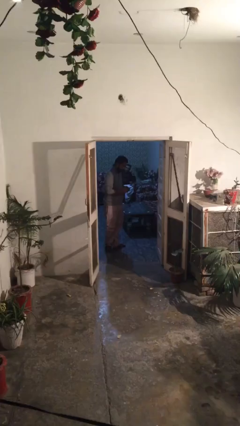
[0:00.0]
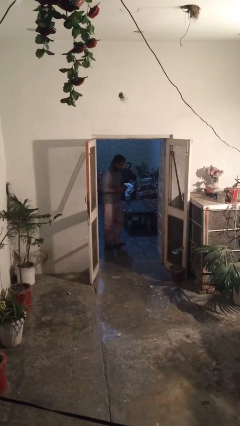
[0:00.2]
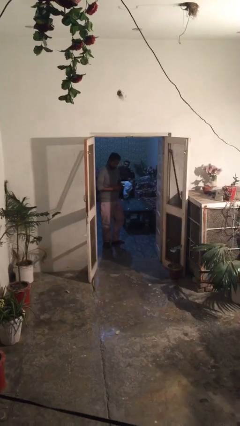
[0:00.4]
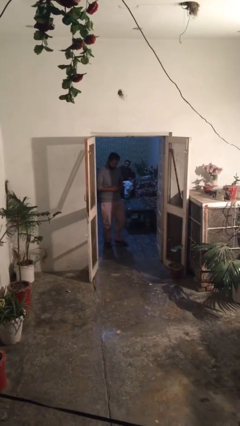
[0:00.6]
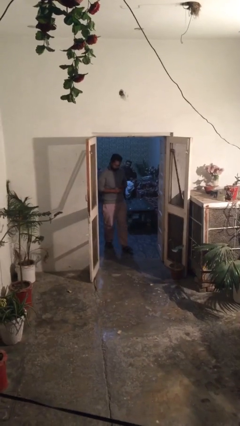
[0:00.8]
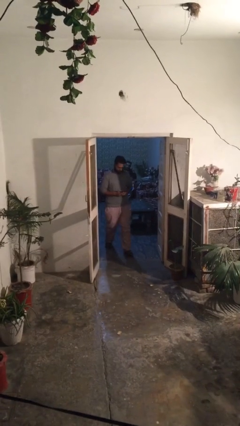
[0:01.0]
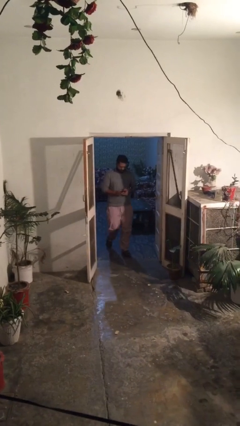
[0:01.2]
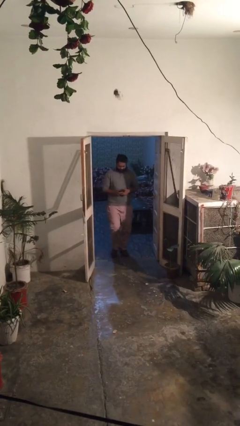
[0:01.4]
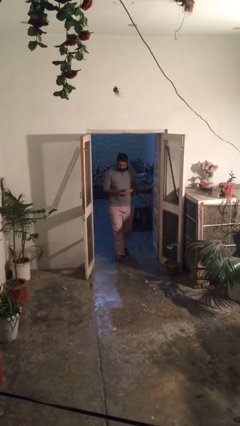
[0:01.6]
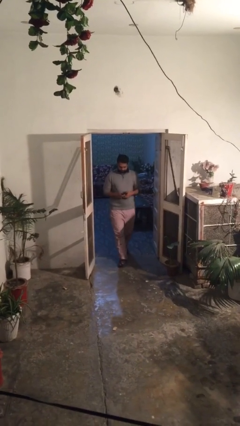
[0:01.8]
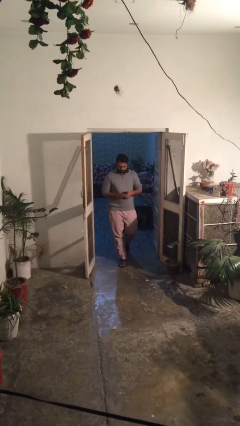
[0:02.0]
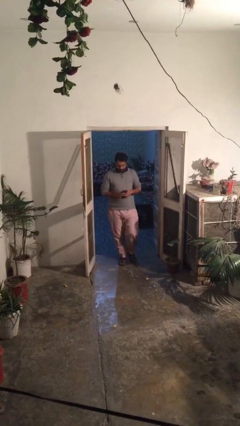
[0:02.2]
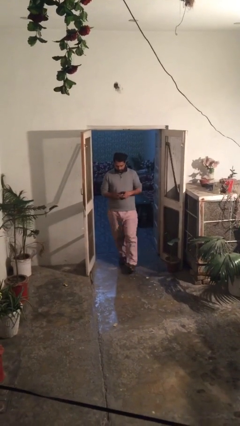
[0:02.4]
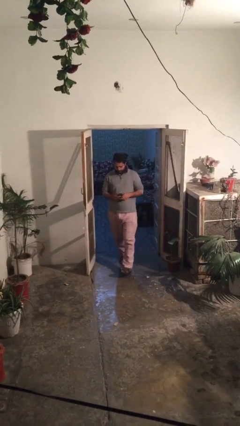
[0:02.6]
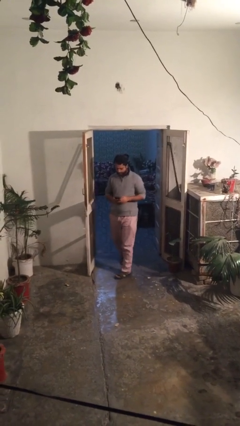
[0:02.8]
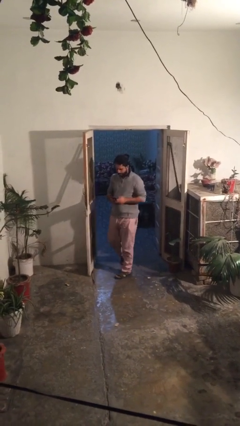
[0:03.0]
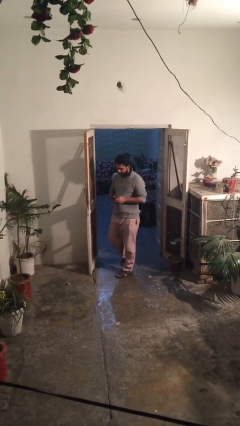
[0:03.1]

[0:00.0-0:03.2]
person enters scene through structure

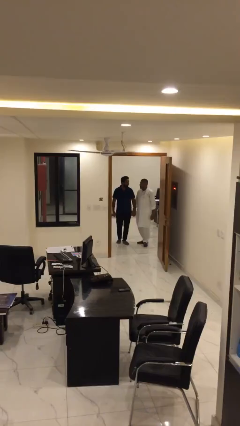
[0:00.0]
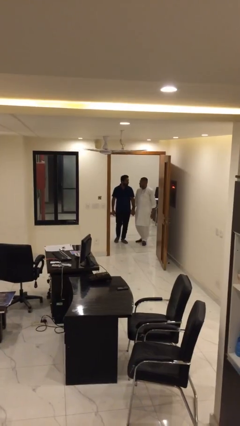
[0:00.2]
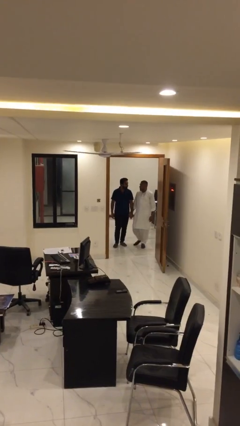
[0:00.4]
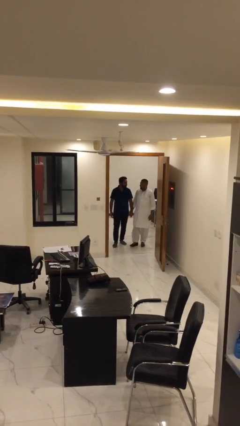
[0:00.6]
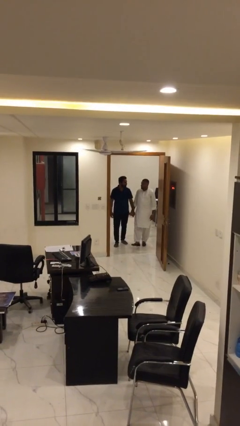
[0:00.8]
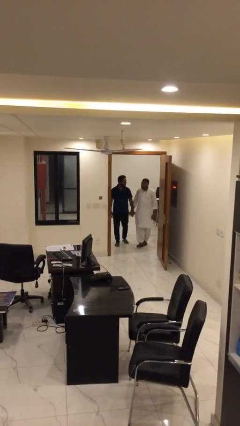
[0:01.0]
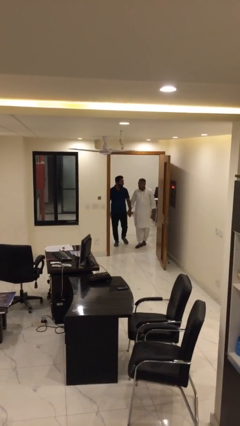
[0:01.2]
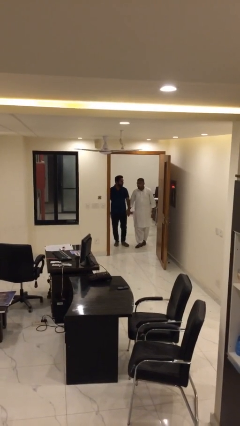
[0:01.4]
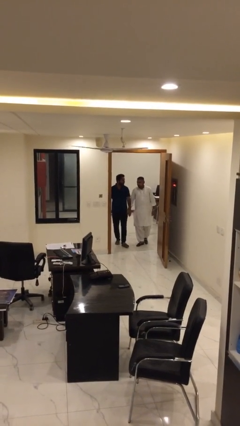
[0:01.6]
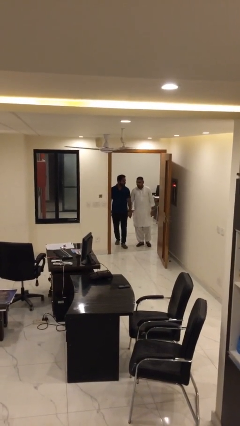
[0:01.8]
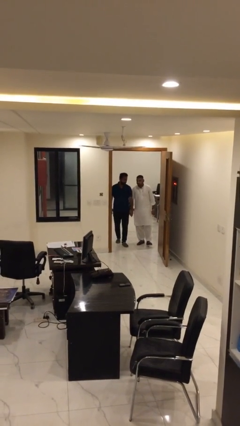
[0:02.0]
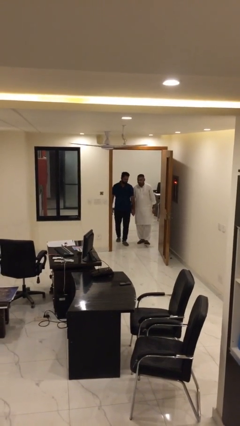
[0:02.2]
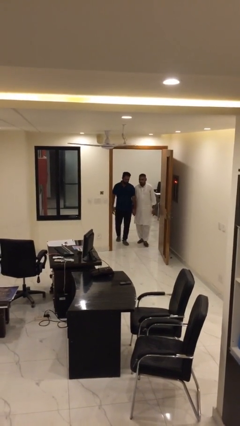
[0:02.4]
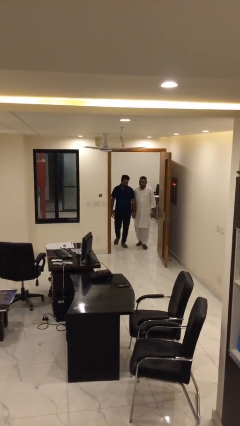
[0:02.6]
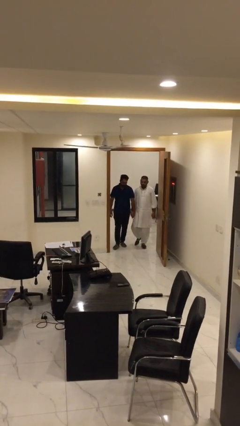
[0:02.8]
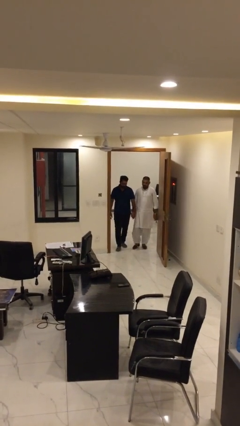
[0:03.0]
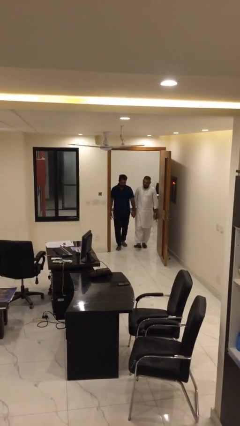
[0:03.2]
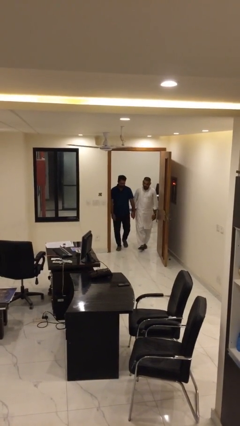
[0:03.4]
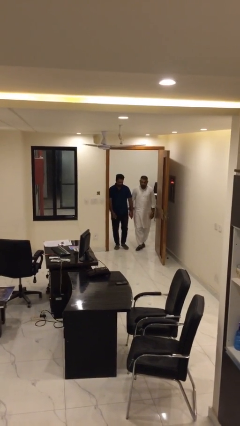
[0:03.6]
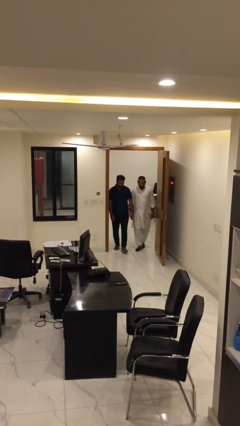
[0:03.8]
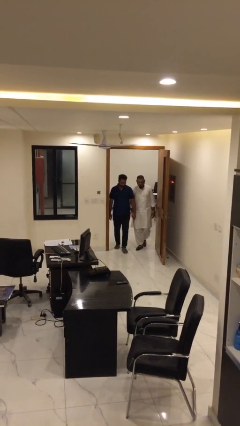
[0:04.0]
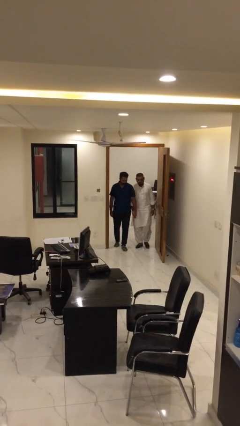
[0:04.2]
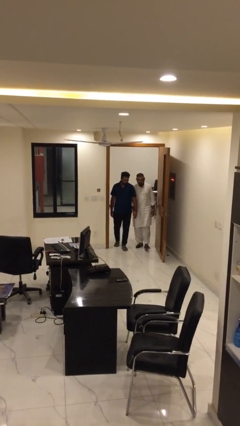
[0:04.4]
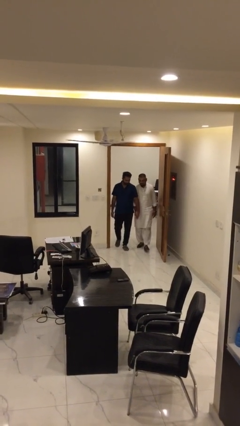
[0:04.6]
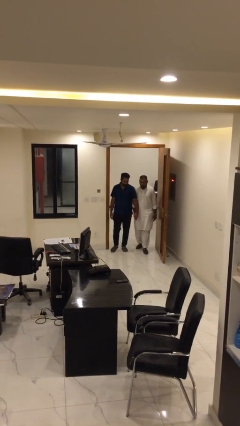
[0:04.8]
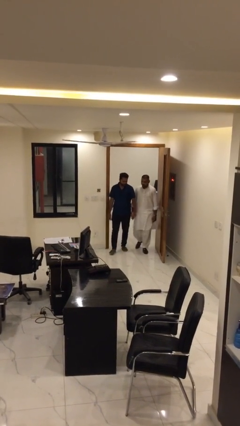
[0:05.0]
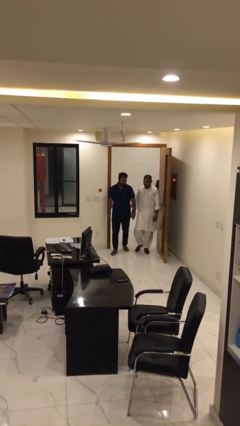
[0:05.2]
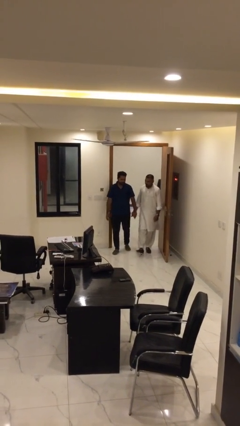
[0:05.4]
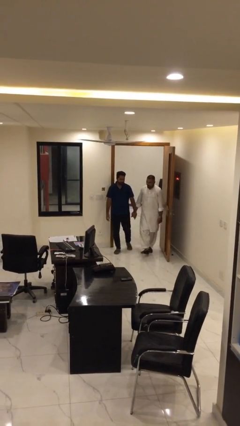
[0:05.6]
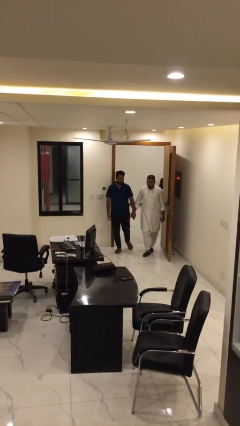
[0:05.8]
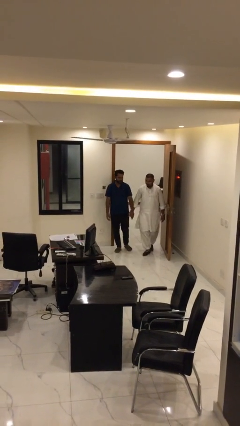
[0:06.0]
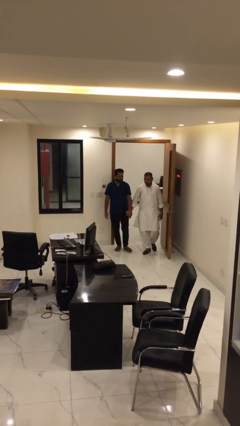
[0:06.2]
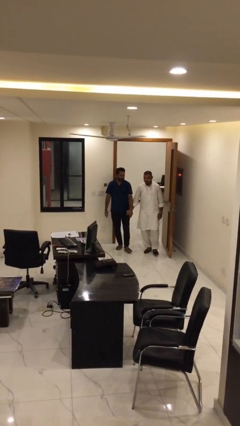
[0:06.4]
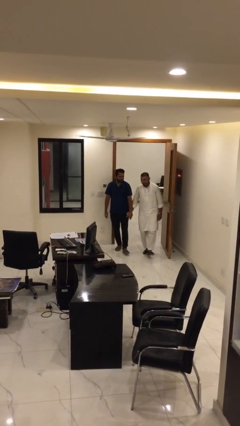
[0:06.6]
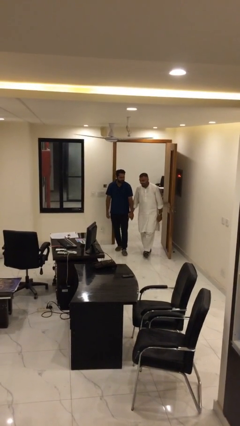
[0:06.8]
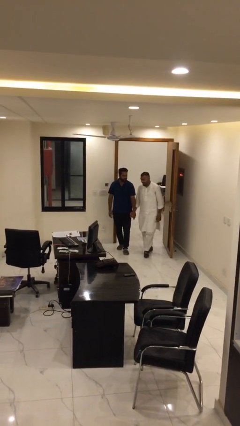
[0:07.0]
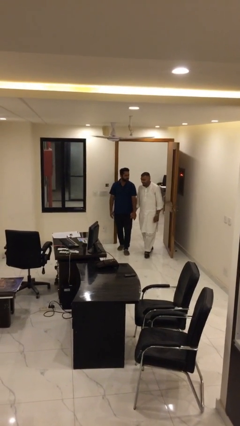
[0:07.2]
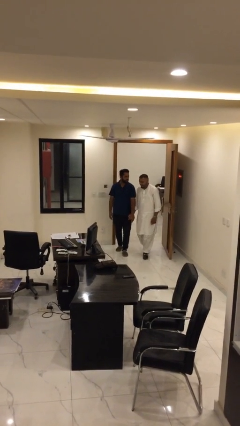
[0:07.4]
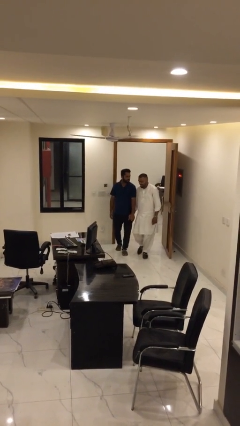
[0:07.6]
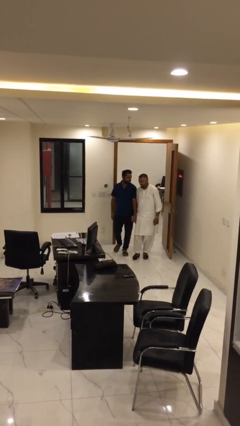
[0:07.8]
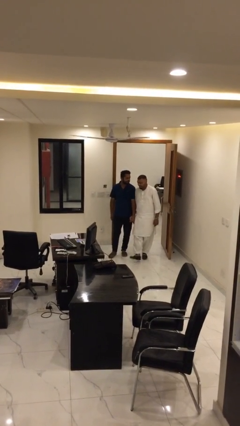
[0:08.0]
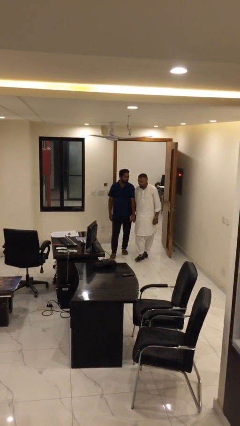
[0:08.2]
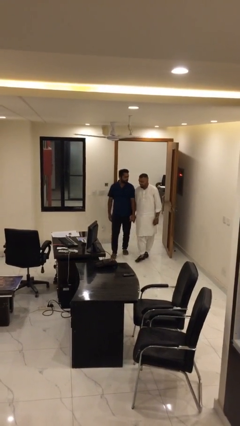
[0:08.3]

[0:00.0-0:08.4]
person holds hand

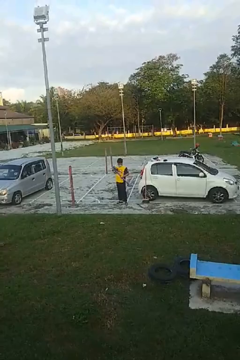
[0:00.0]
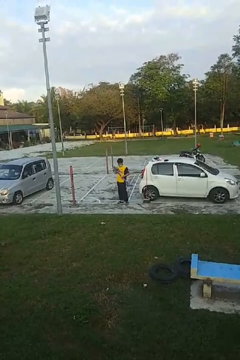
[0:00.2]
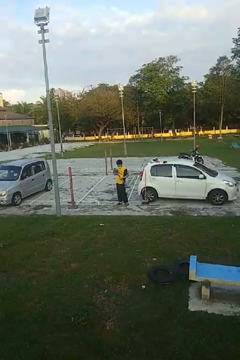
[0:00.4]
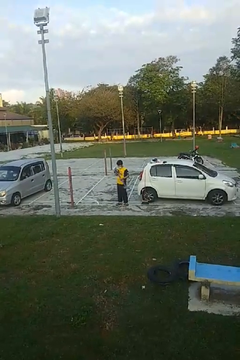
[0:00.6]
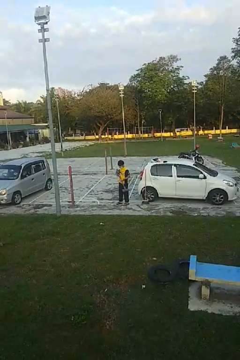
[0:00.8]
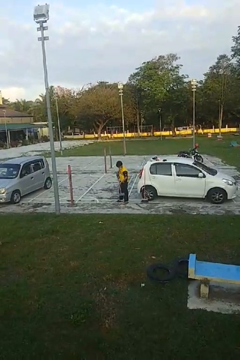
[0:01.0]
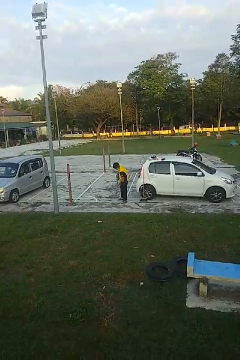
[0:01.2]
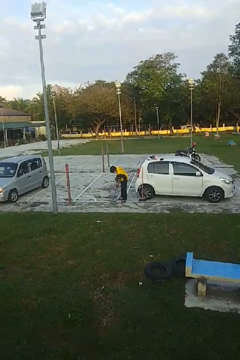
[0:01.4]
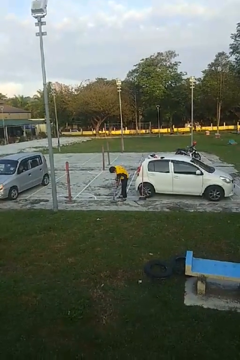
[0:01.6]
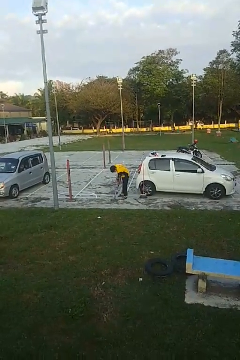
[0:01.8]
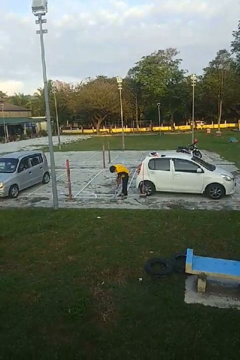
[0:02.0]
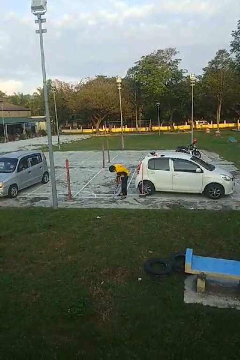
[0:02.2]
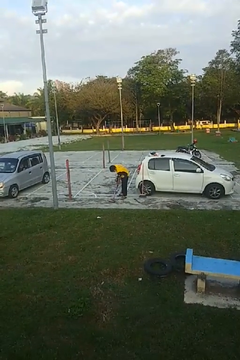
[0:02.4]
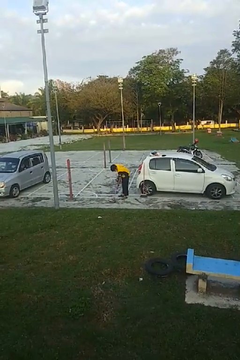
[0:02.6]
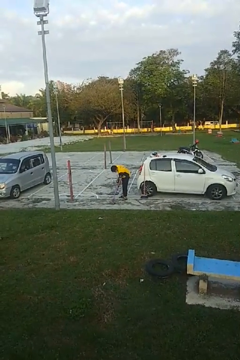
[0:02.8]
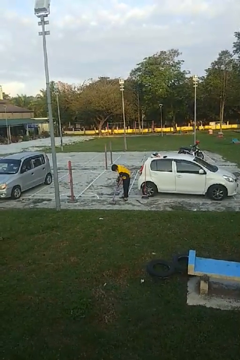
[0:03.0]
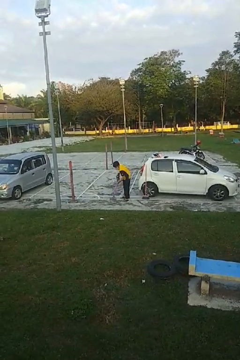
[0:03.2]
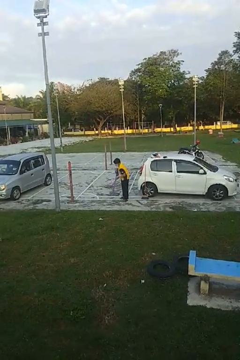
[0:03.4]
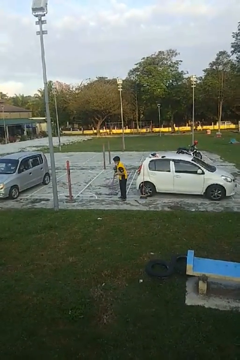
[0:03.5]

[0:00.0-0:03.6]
person vacuums carpet

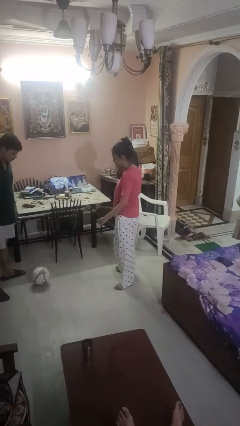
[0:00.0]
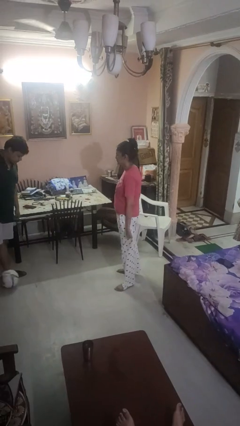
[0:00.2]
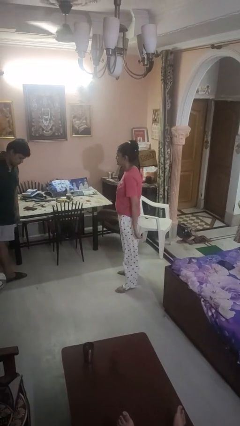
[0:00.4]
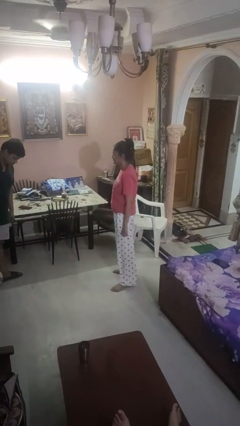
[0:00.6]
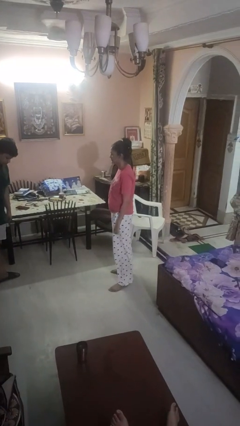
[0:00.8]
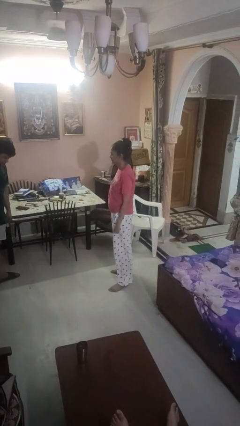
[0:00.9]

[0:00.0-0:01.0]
person kicks object to person

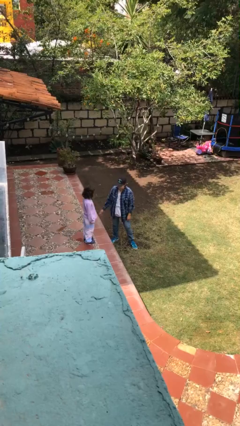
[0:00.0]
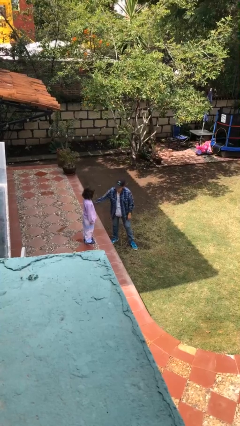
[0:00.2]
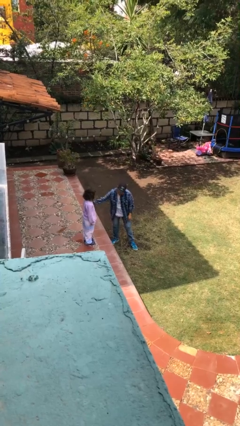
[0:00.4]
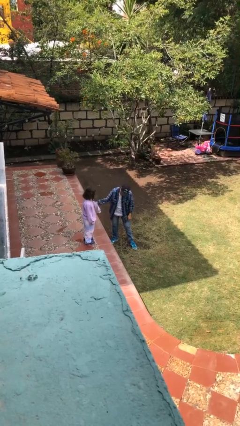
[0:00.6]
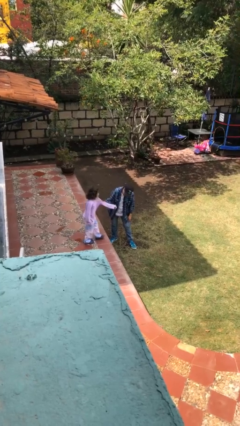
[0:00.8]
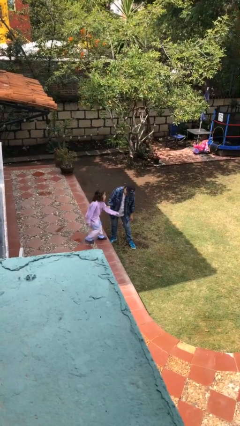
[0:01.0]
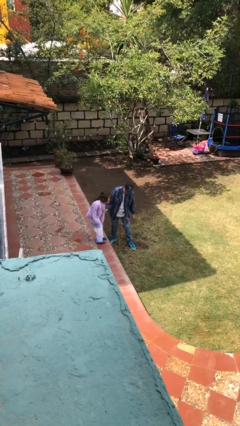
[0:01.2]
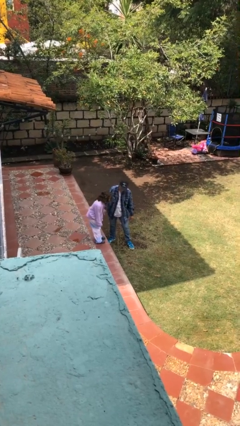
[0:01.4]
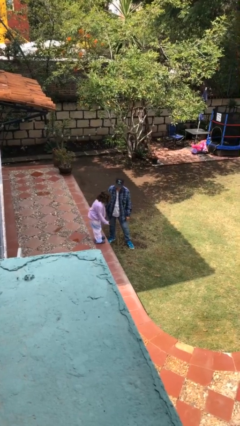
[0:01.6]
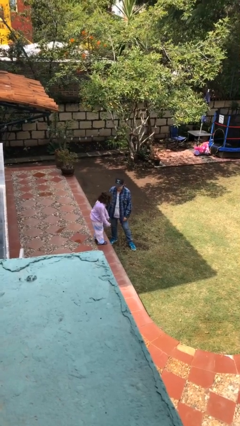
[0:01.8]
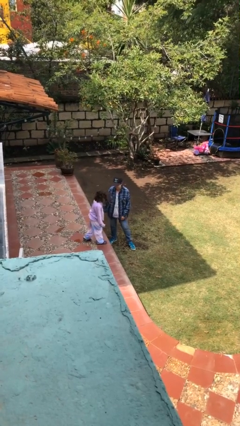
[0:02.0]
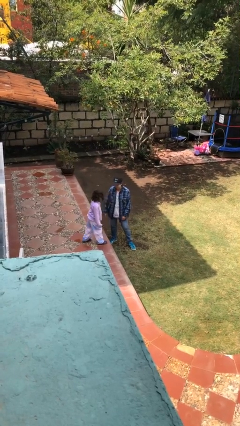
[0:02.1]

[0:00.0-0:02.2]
person grabs person by bicep
